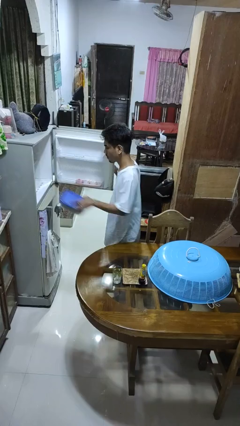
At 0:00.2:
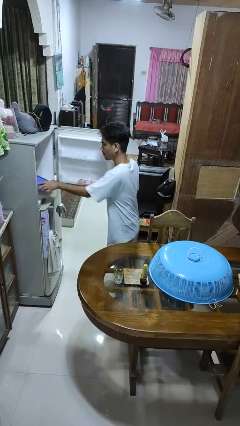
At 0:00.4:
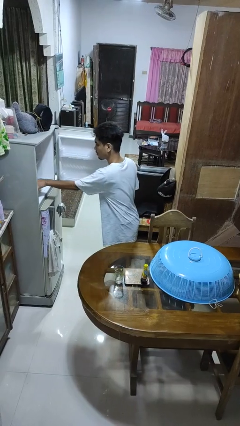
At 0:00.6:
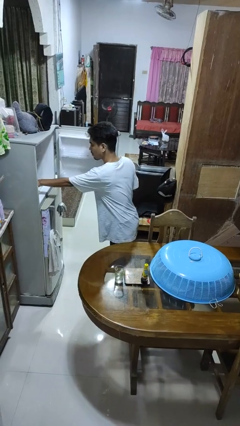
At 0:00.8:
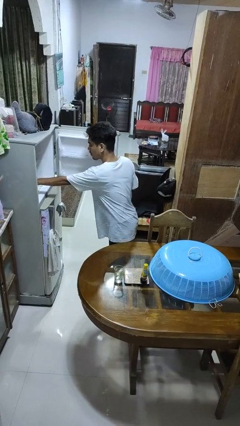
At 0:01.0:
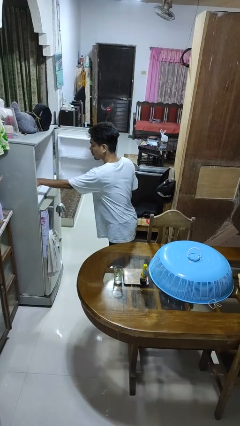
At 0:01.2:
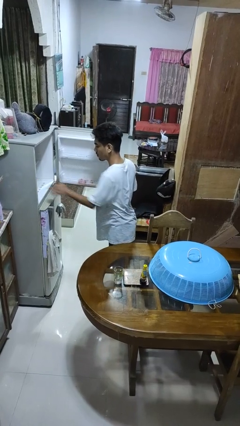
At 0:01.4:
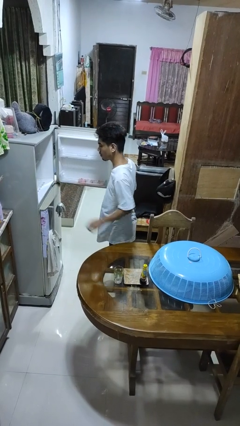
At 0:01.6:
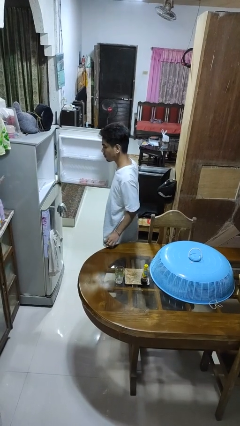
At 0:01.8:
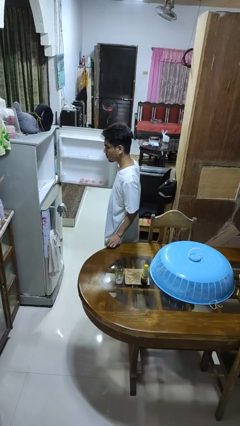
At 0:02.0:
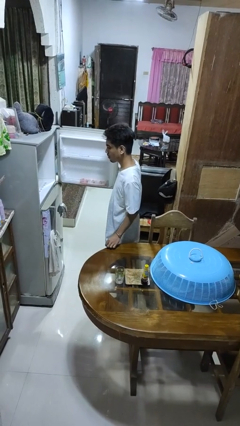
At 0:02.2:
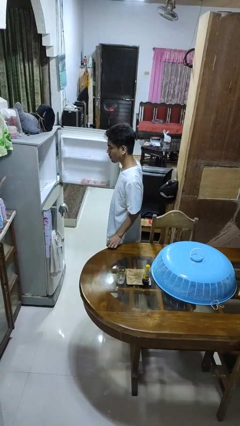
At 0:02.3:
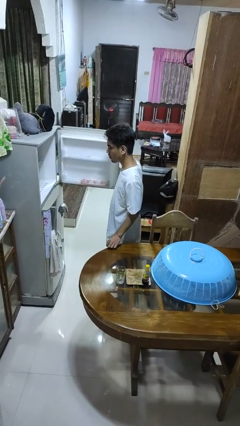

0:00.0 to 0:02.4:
person puts object into refrigerator

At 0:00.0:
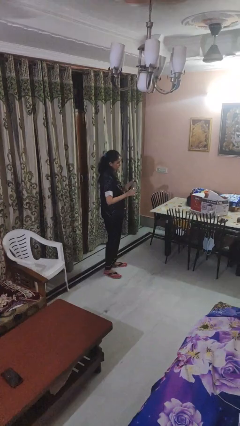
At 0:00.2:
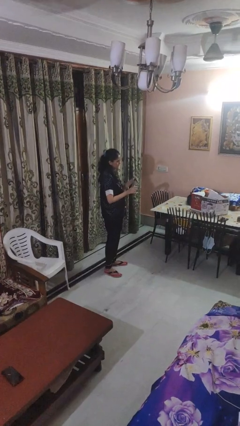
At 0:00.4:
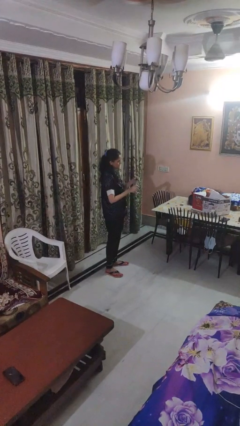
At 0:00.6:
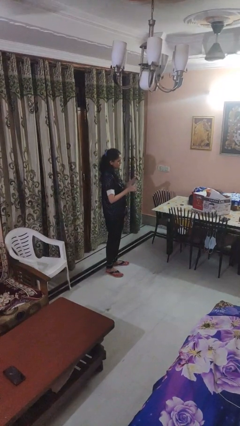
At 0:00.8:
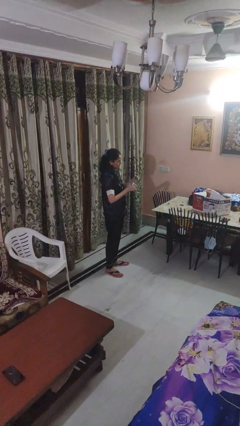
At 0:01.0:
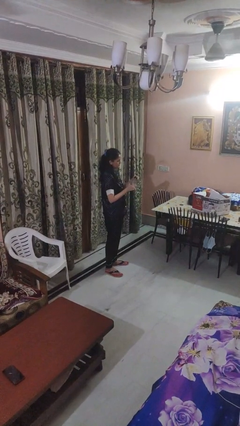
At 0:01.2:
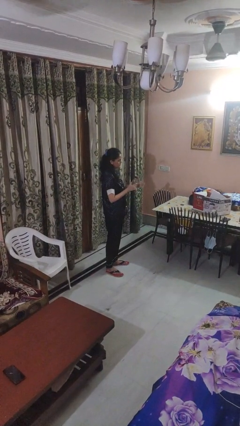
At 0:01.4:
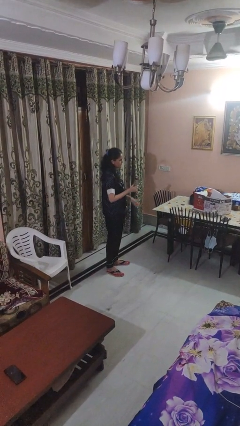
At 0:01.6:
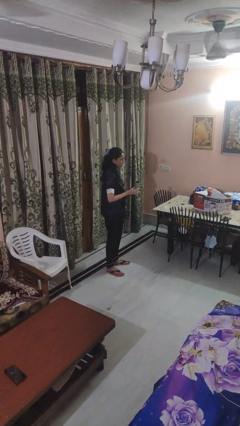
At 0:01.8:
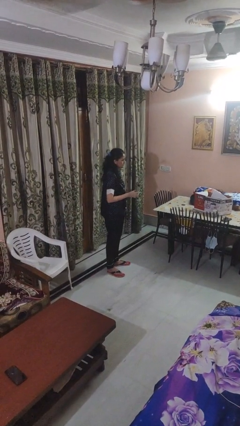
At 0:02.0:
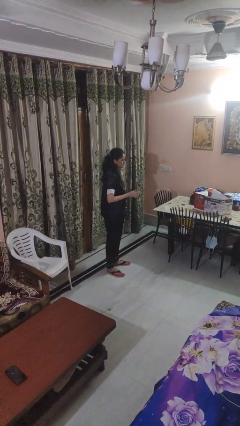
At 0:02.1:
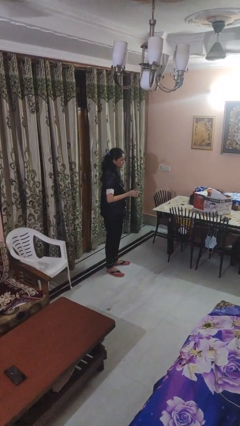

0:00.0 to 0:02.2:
person screws lid to bottle

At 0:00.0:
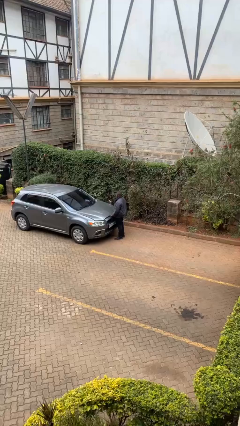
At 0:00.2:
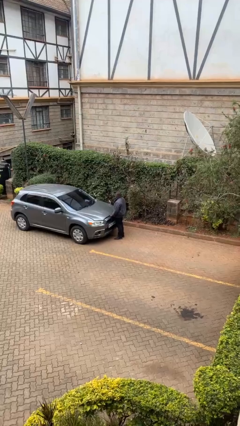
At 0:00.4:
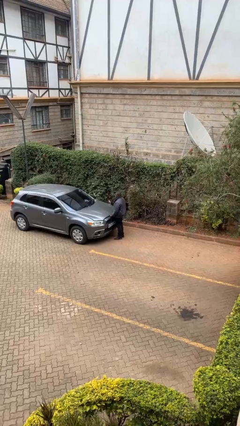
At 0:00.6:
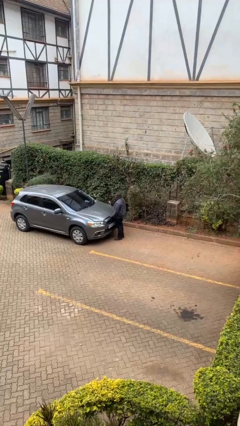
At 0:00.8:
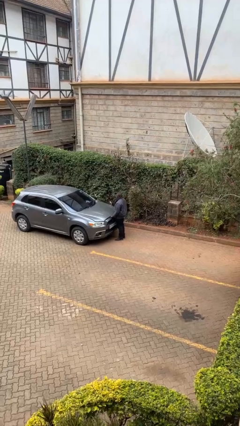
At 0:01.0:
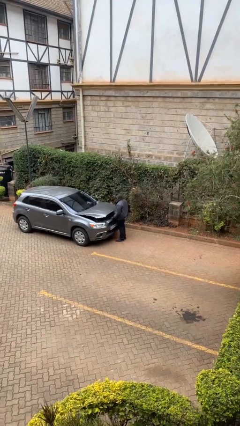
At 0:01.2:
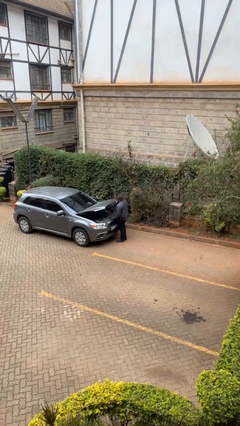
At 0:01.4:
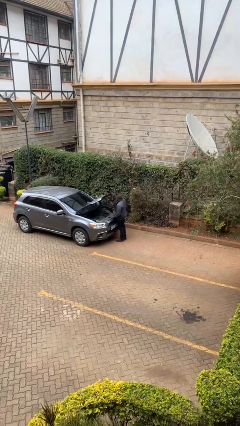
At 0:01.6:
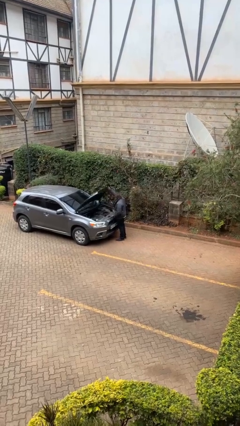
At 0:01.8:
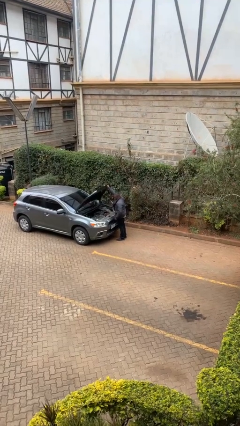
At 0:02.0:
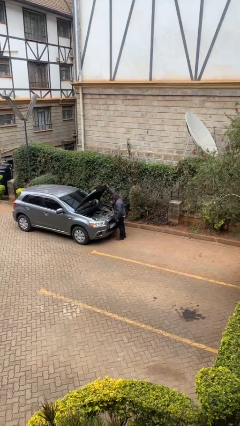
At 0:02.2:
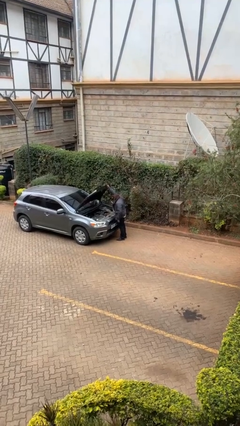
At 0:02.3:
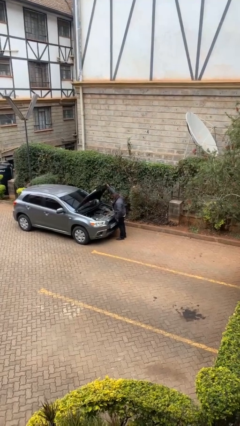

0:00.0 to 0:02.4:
person opens car hood

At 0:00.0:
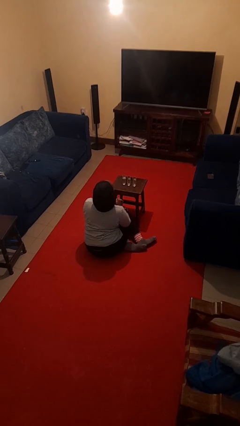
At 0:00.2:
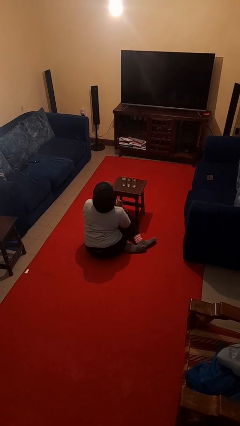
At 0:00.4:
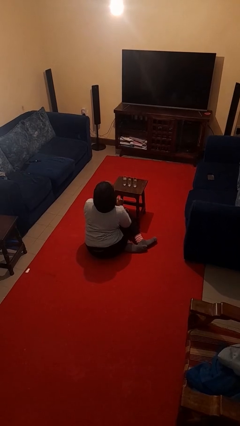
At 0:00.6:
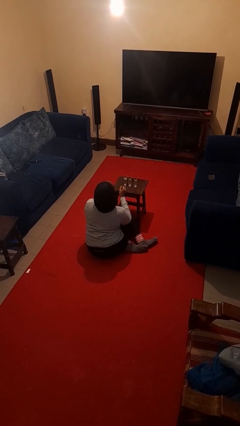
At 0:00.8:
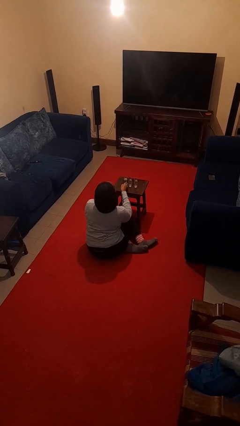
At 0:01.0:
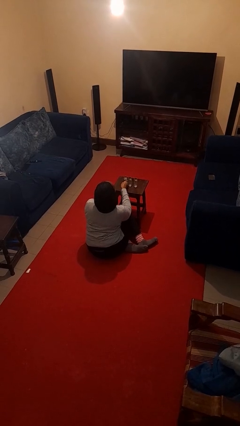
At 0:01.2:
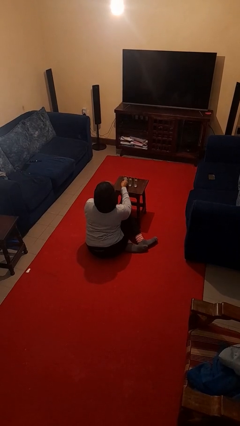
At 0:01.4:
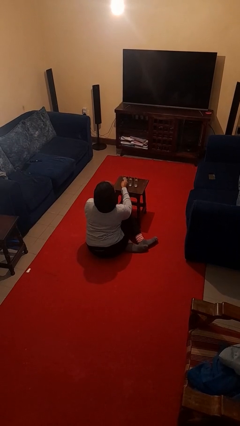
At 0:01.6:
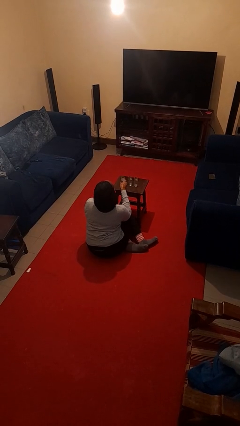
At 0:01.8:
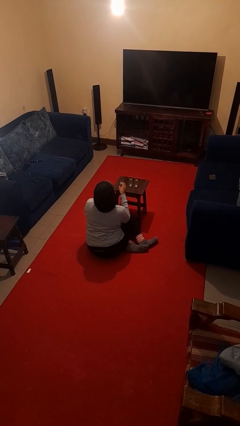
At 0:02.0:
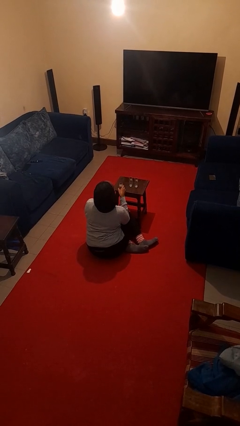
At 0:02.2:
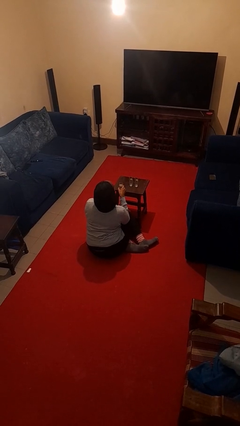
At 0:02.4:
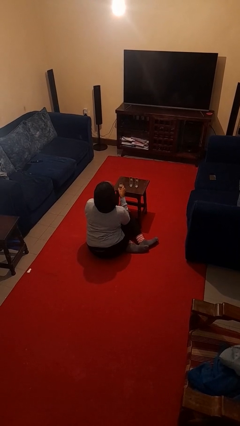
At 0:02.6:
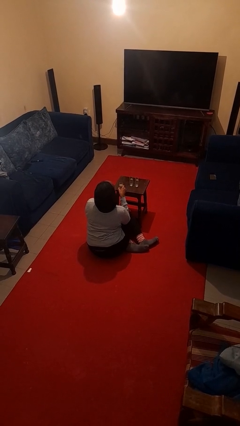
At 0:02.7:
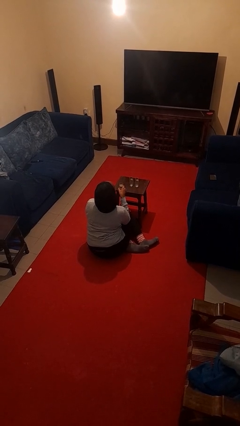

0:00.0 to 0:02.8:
person picks up object from table

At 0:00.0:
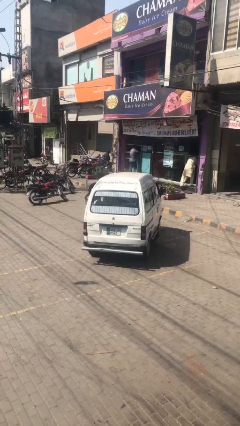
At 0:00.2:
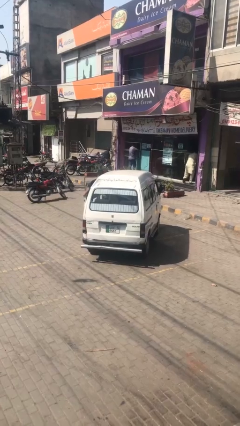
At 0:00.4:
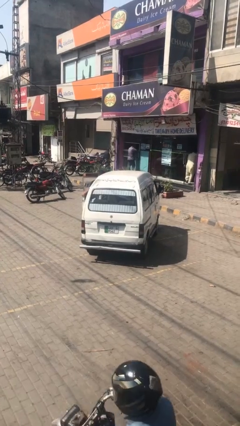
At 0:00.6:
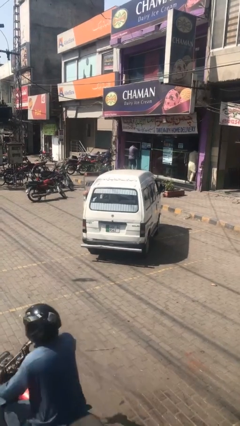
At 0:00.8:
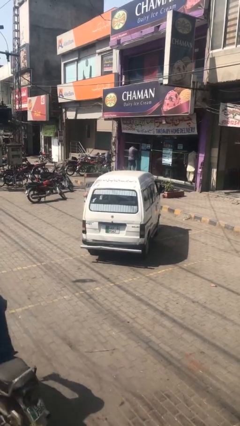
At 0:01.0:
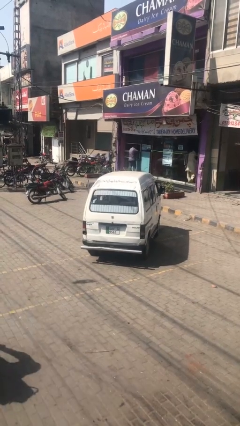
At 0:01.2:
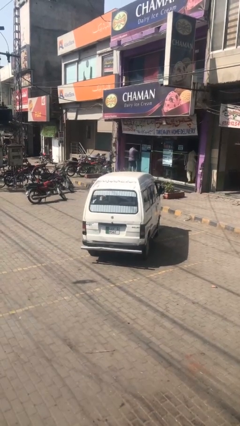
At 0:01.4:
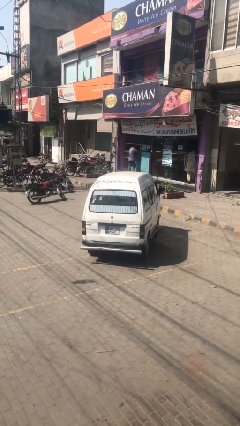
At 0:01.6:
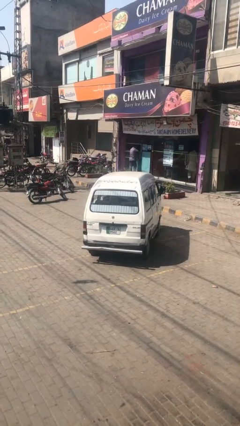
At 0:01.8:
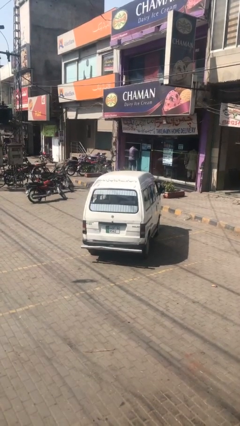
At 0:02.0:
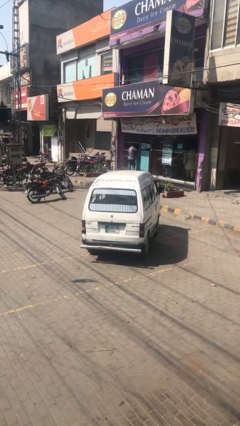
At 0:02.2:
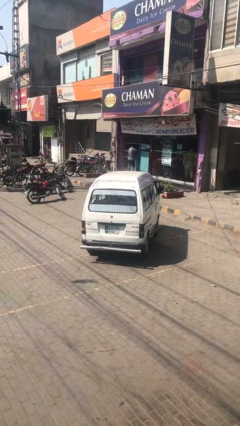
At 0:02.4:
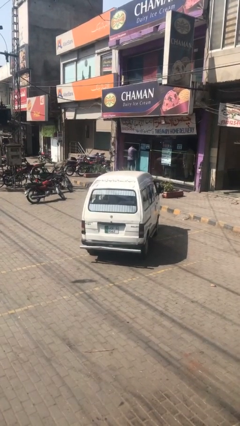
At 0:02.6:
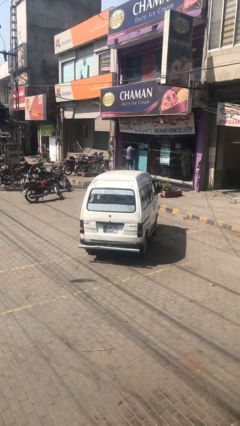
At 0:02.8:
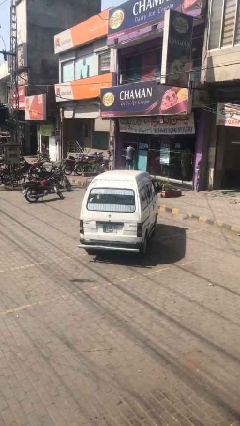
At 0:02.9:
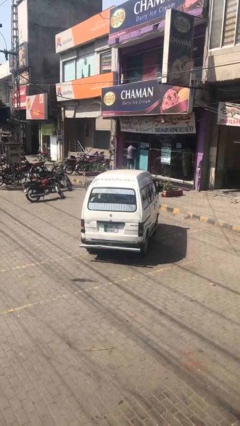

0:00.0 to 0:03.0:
car picks up person

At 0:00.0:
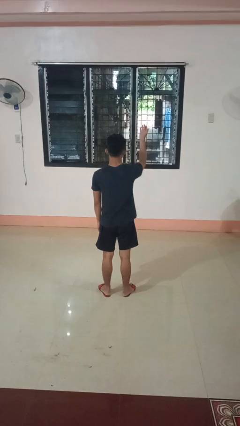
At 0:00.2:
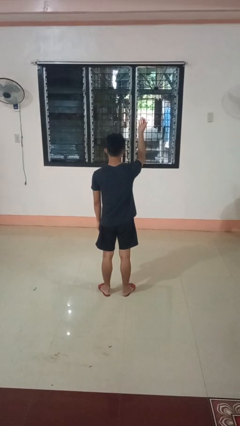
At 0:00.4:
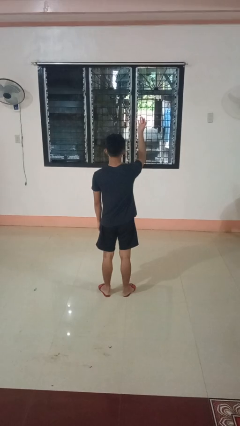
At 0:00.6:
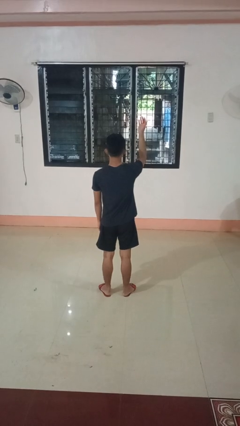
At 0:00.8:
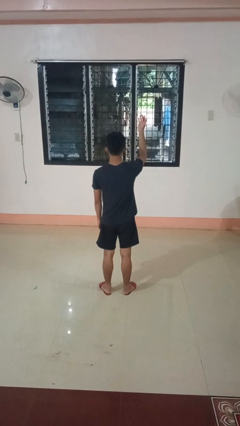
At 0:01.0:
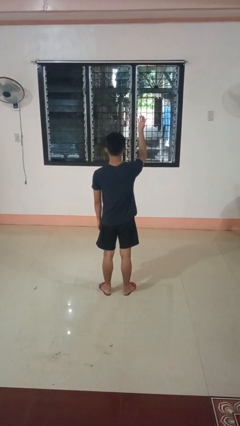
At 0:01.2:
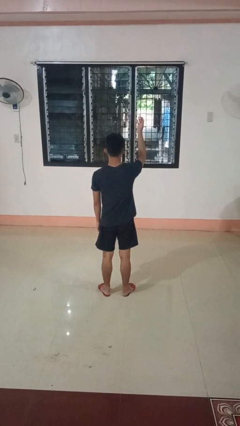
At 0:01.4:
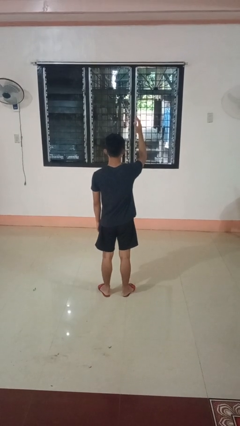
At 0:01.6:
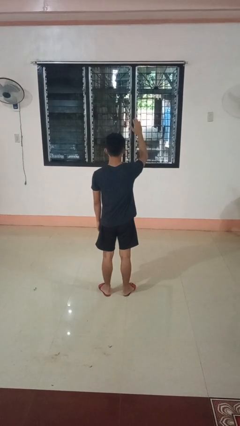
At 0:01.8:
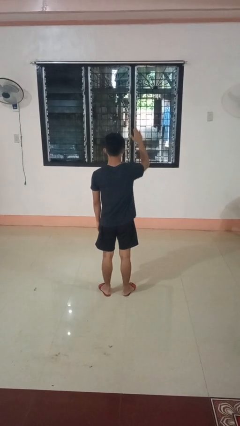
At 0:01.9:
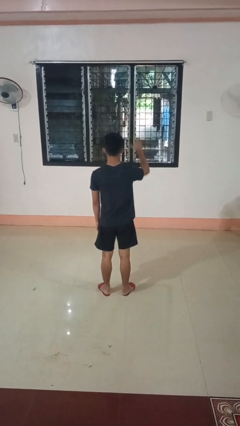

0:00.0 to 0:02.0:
person gestures swipe up

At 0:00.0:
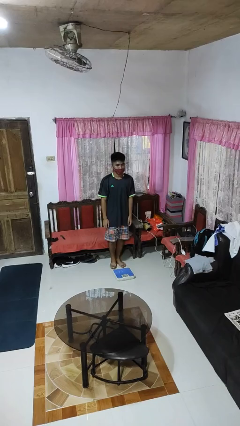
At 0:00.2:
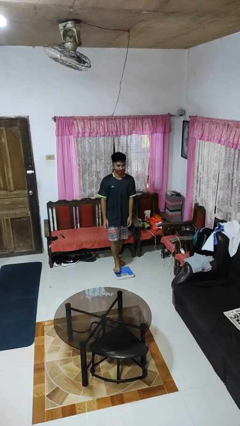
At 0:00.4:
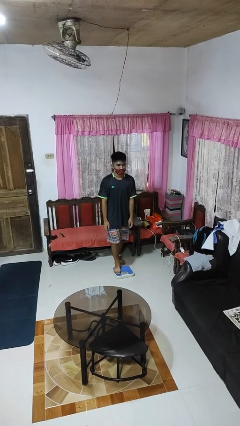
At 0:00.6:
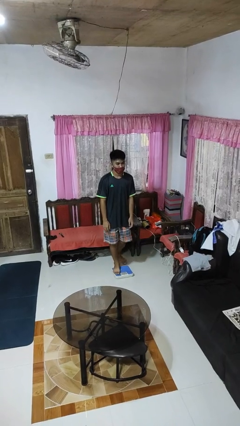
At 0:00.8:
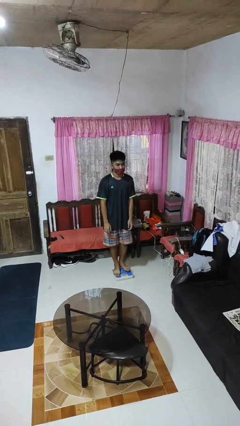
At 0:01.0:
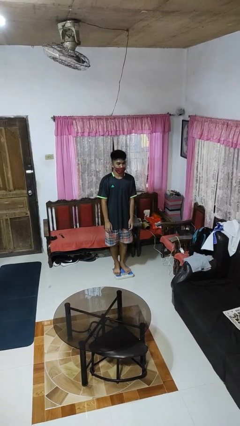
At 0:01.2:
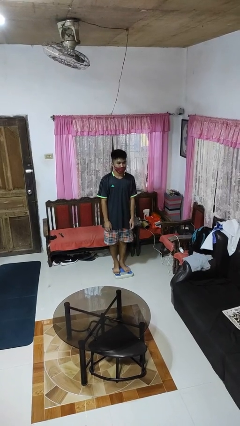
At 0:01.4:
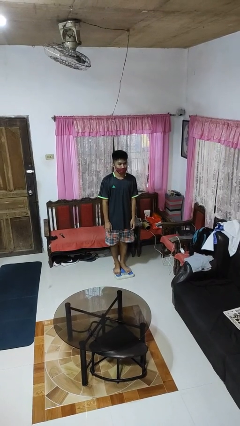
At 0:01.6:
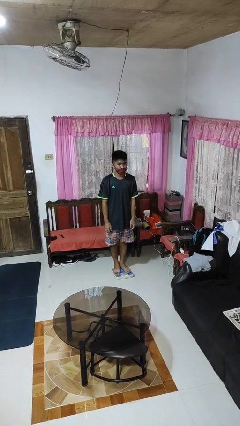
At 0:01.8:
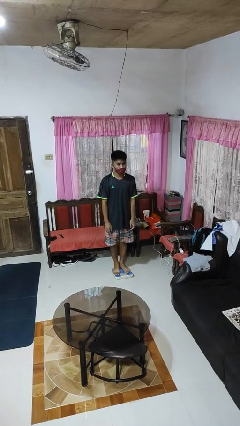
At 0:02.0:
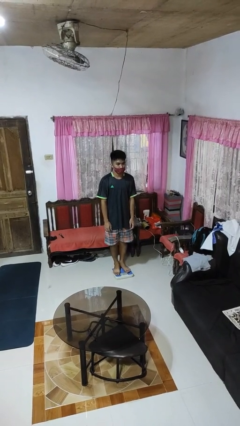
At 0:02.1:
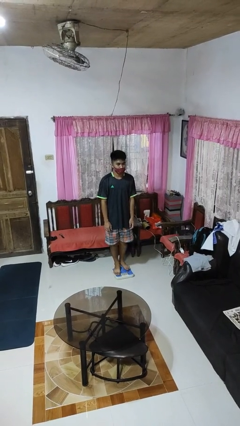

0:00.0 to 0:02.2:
person uses bodyweight scale
